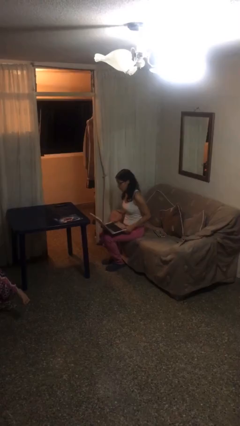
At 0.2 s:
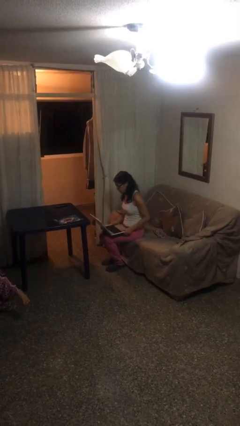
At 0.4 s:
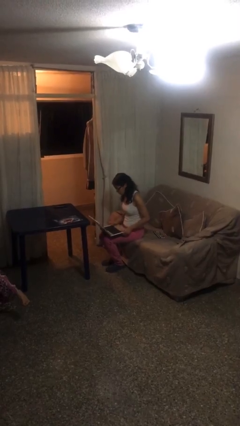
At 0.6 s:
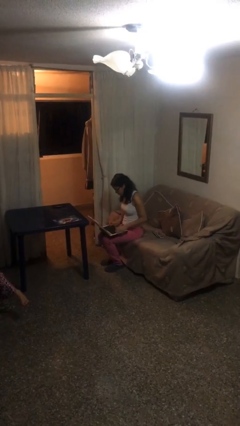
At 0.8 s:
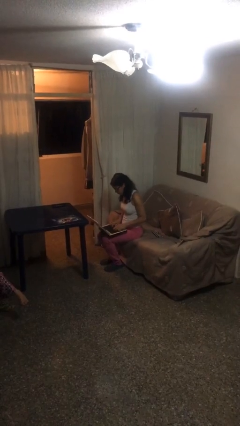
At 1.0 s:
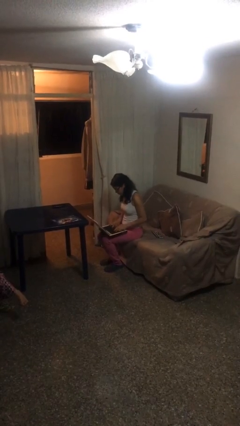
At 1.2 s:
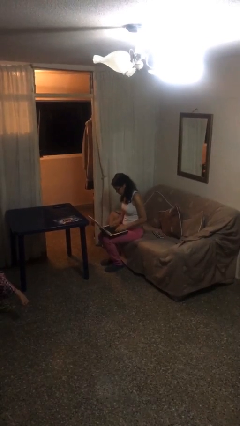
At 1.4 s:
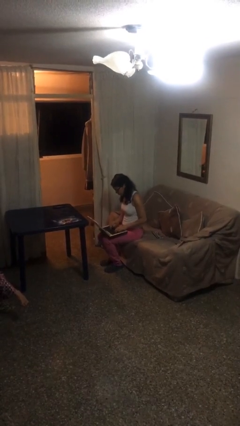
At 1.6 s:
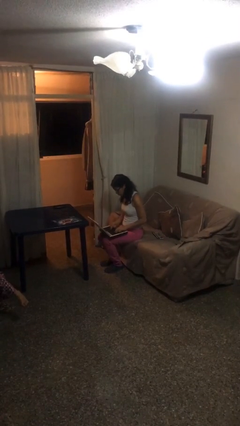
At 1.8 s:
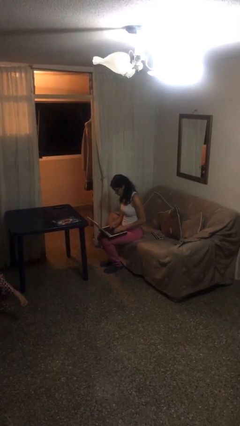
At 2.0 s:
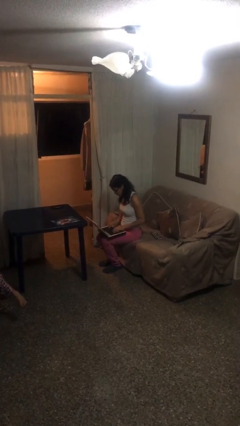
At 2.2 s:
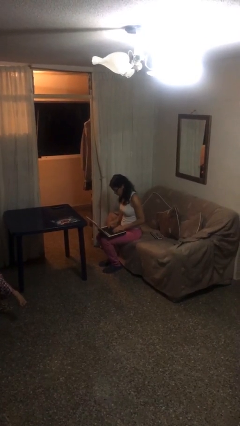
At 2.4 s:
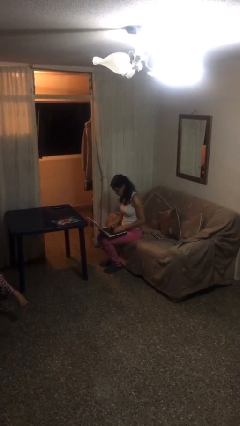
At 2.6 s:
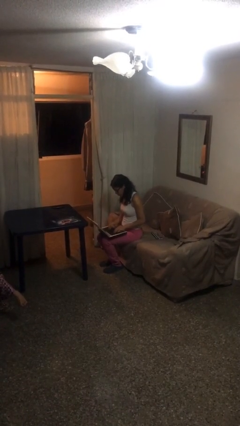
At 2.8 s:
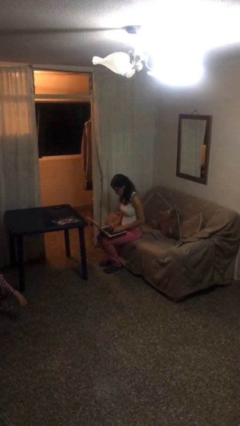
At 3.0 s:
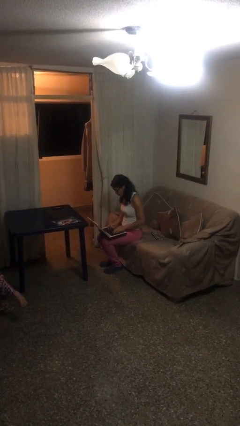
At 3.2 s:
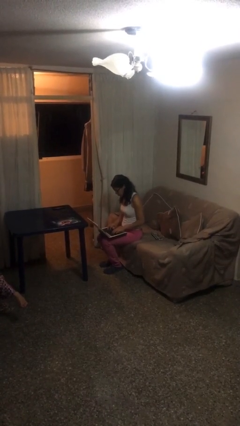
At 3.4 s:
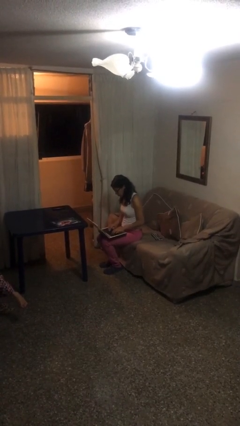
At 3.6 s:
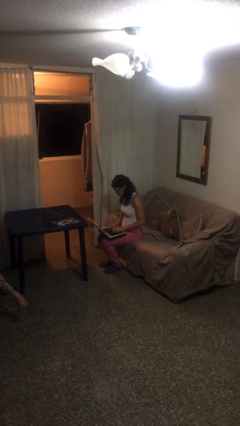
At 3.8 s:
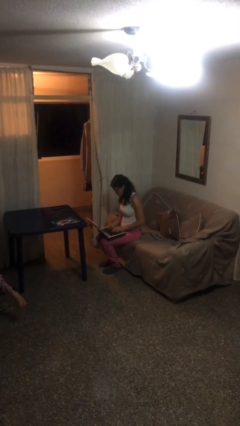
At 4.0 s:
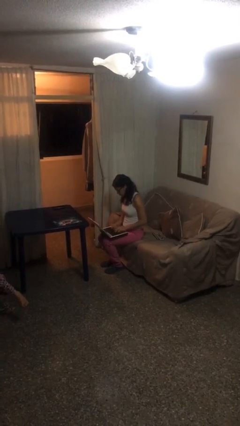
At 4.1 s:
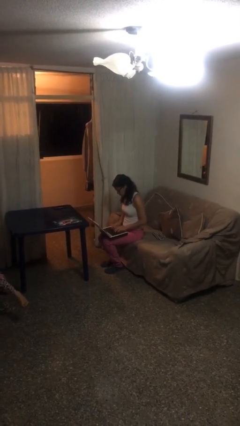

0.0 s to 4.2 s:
person interacts with laptop

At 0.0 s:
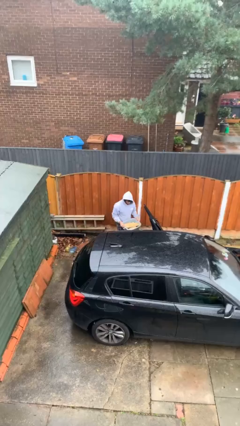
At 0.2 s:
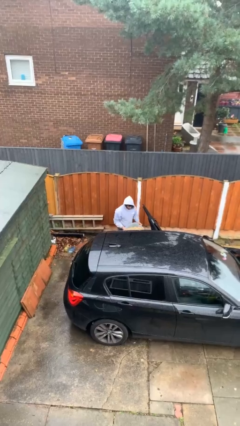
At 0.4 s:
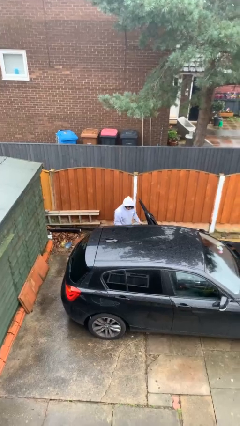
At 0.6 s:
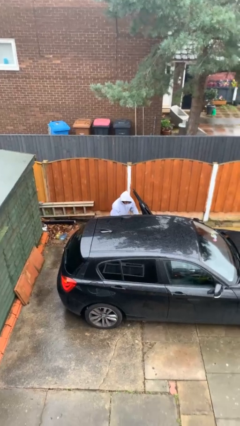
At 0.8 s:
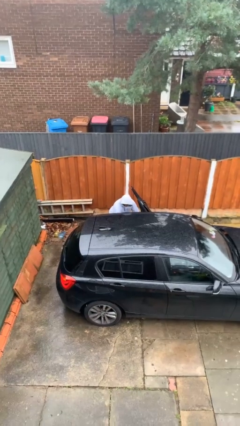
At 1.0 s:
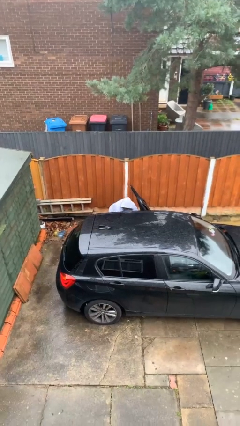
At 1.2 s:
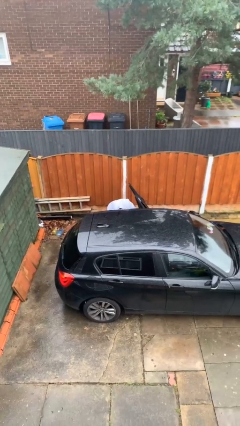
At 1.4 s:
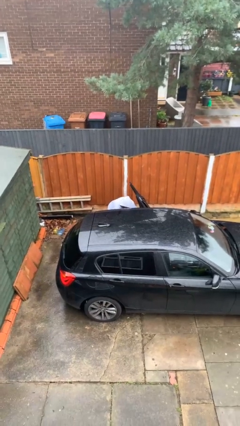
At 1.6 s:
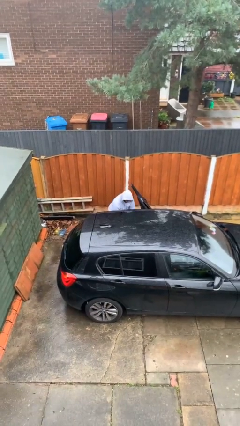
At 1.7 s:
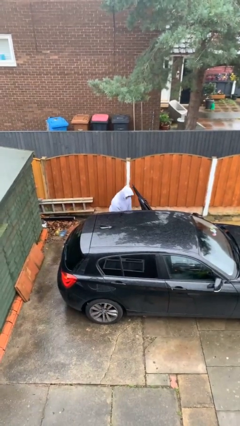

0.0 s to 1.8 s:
person loads car

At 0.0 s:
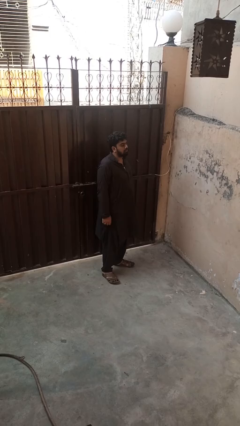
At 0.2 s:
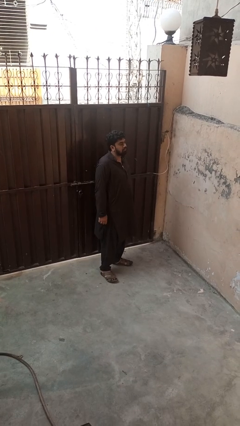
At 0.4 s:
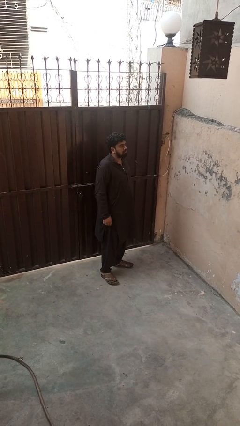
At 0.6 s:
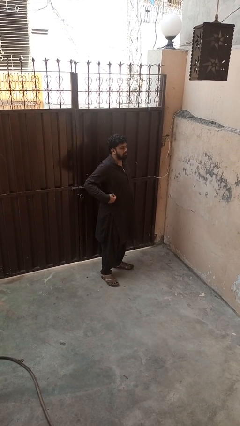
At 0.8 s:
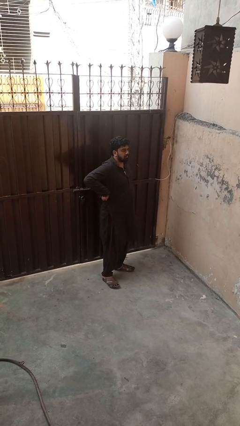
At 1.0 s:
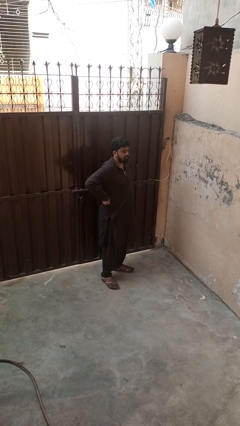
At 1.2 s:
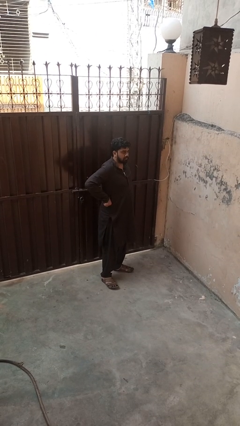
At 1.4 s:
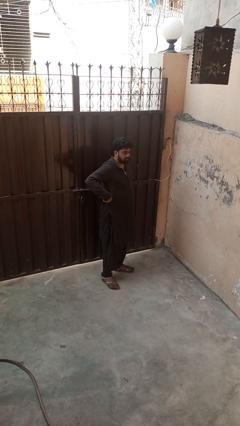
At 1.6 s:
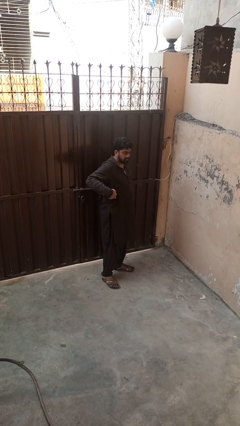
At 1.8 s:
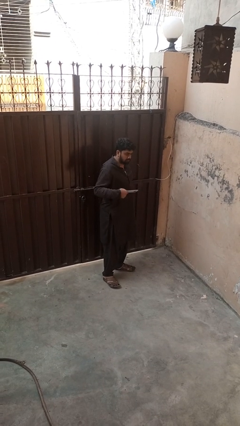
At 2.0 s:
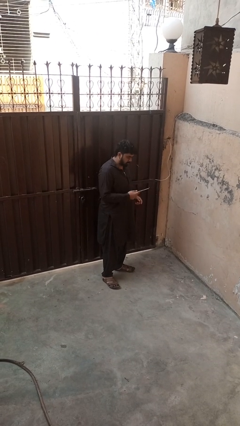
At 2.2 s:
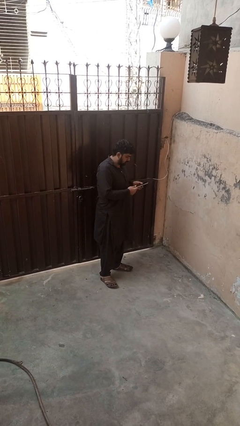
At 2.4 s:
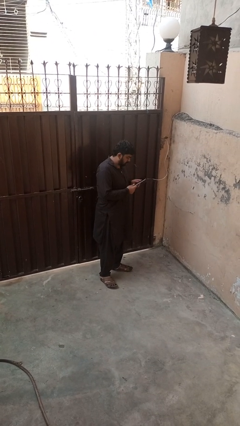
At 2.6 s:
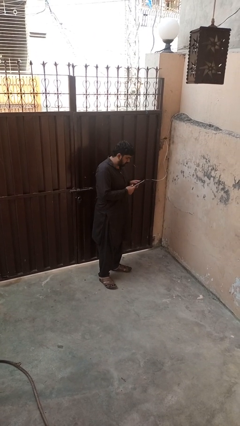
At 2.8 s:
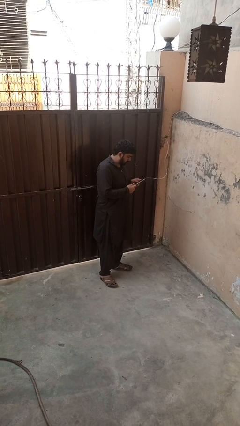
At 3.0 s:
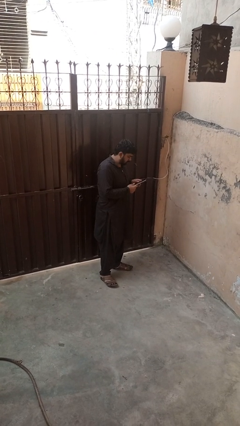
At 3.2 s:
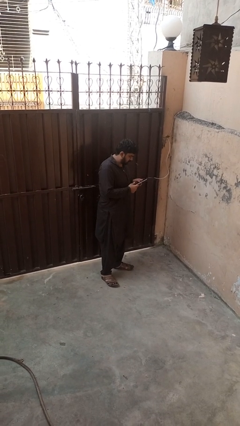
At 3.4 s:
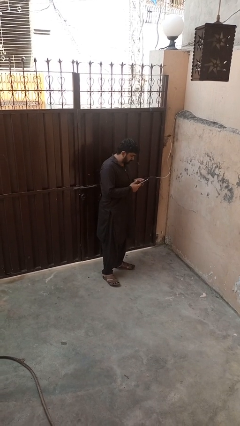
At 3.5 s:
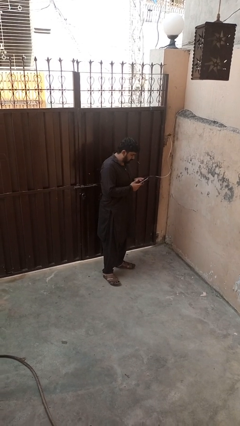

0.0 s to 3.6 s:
person takes phone from pocket

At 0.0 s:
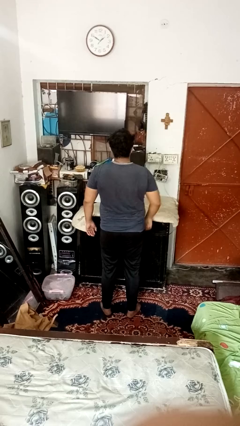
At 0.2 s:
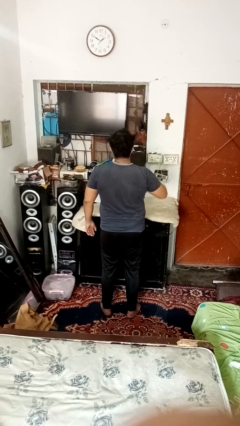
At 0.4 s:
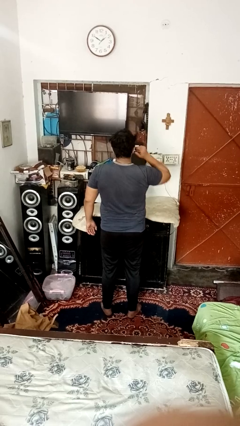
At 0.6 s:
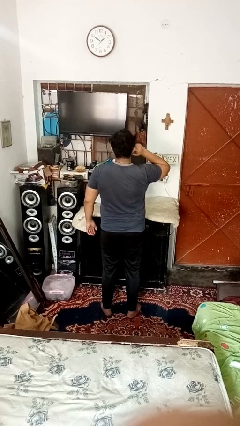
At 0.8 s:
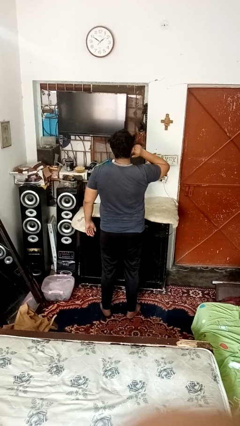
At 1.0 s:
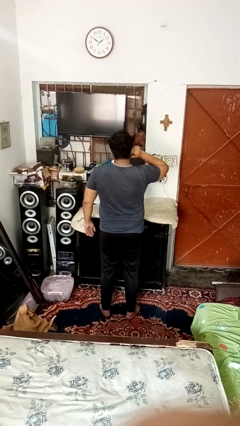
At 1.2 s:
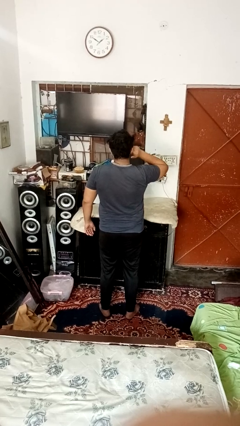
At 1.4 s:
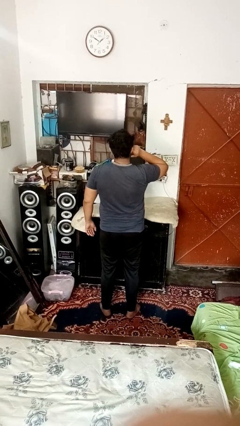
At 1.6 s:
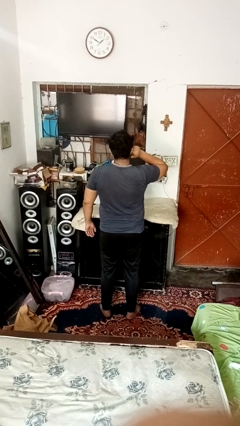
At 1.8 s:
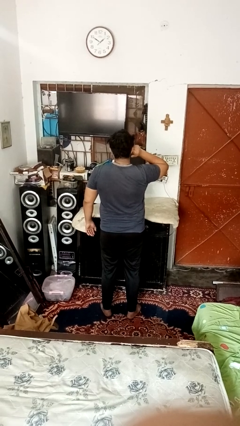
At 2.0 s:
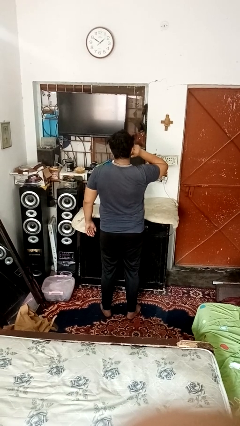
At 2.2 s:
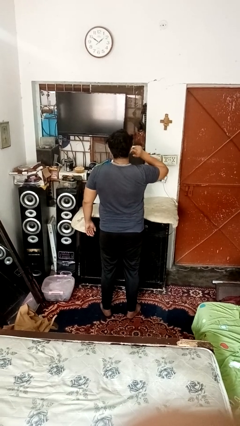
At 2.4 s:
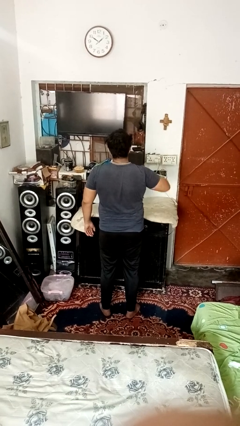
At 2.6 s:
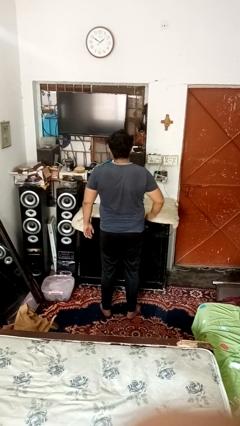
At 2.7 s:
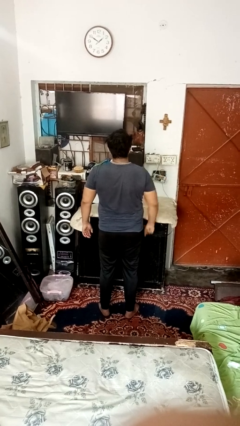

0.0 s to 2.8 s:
person puts fingers in ear

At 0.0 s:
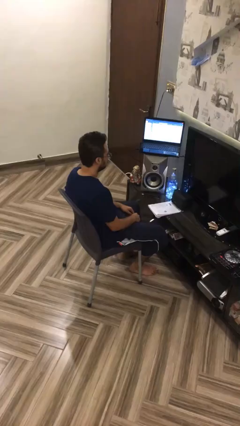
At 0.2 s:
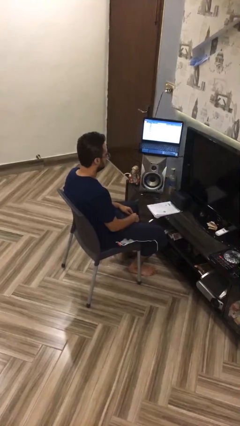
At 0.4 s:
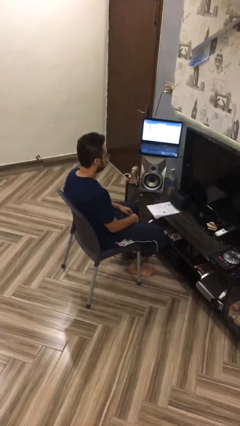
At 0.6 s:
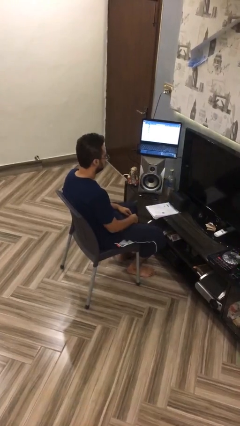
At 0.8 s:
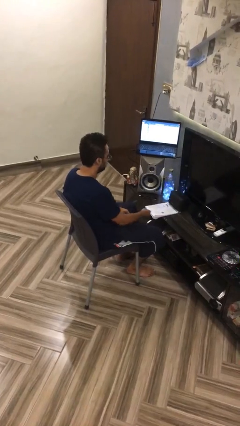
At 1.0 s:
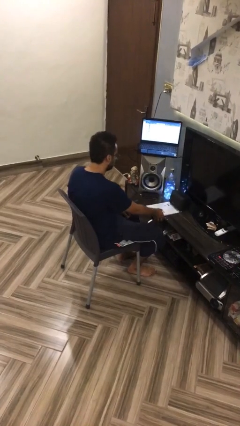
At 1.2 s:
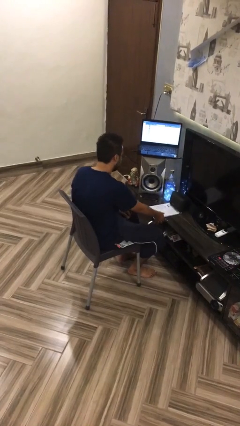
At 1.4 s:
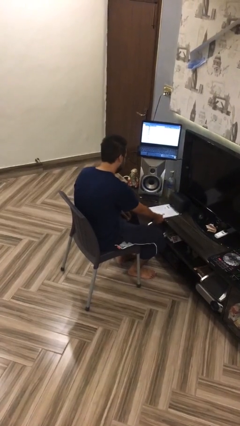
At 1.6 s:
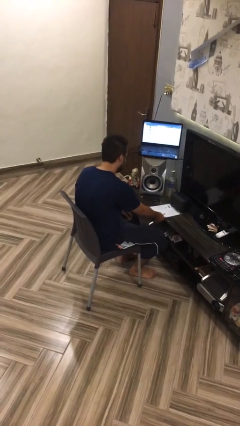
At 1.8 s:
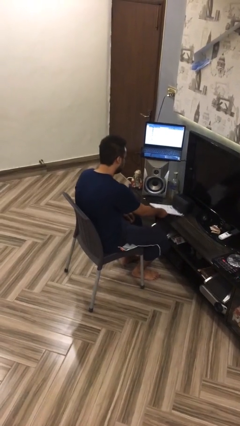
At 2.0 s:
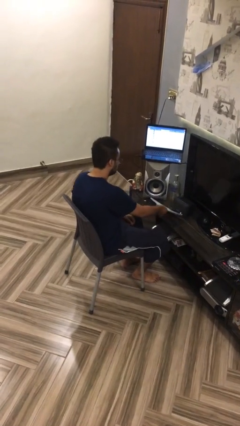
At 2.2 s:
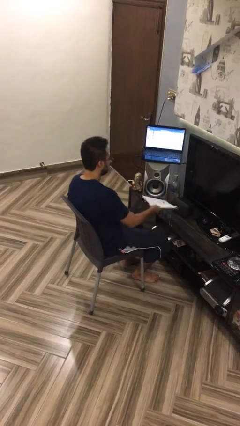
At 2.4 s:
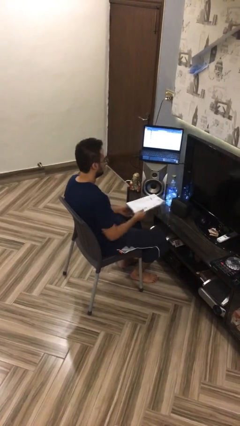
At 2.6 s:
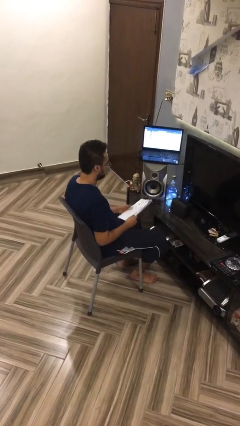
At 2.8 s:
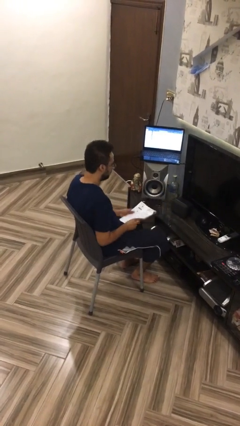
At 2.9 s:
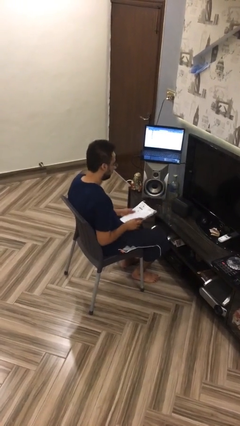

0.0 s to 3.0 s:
person picks up object from table

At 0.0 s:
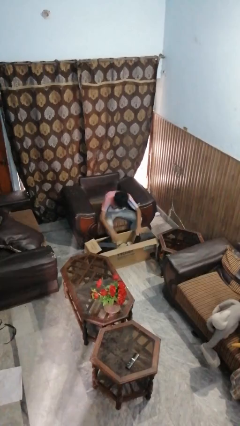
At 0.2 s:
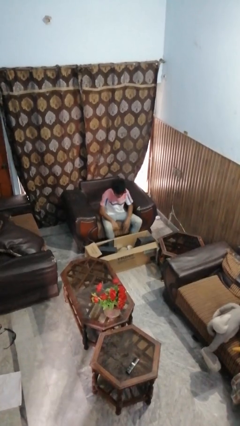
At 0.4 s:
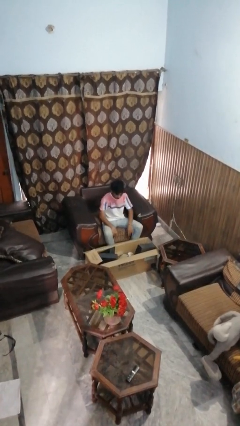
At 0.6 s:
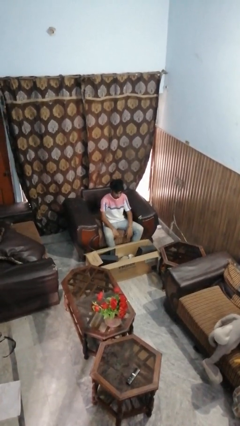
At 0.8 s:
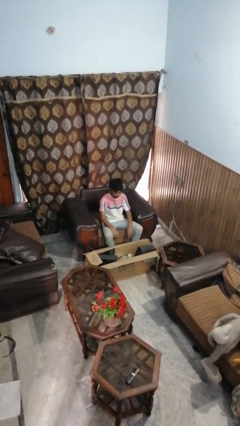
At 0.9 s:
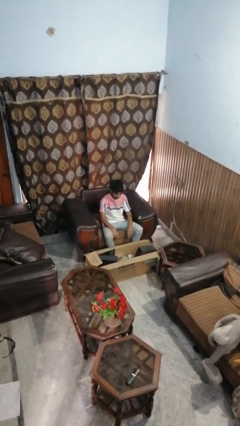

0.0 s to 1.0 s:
person searches in box

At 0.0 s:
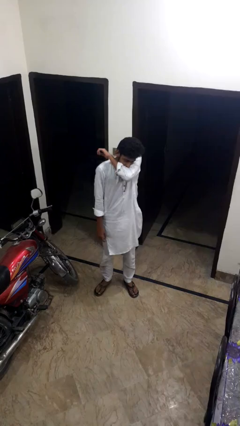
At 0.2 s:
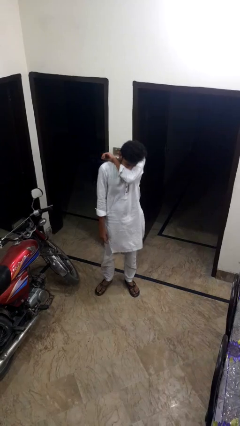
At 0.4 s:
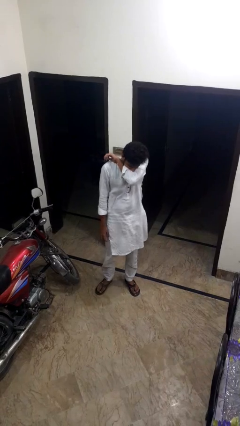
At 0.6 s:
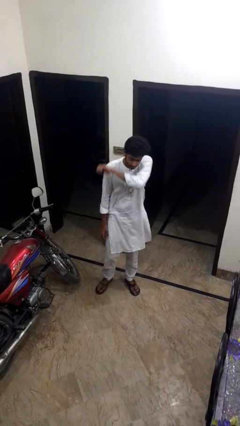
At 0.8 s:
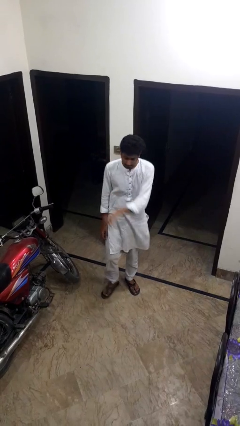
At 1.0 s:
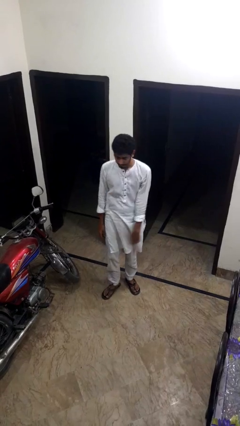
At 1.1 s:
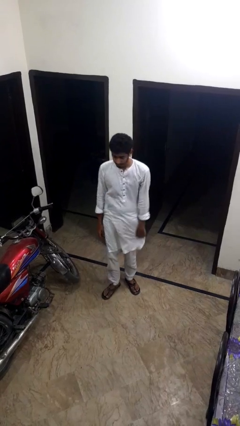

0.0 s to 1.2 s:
person sneezes into arm
